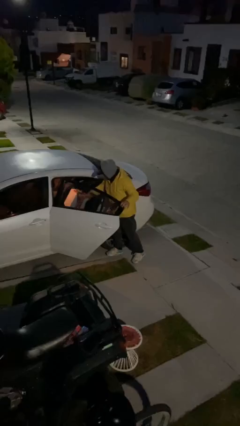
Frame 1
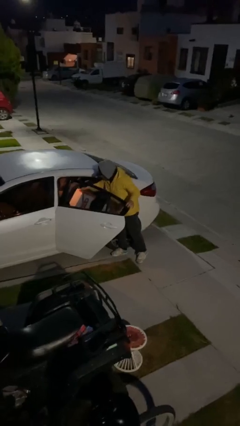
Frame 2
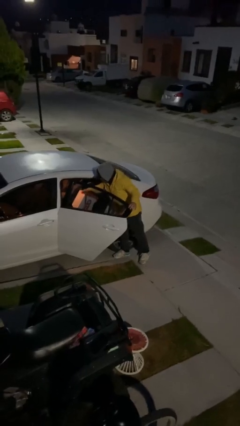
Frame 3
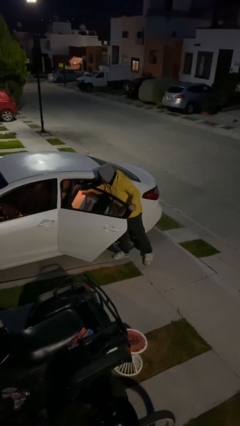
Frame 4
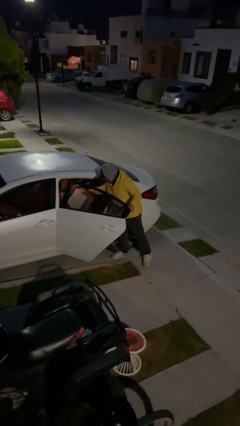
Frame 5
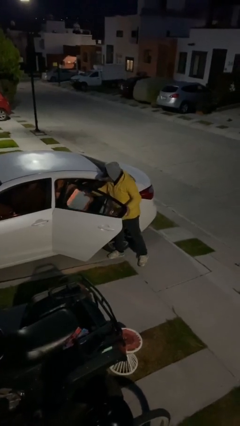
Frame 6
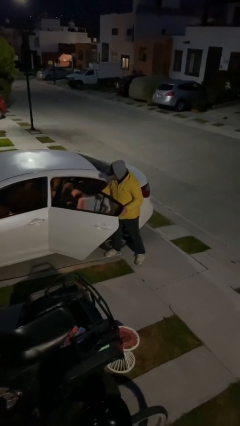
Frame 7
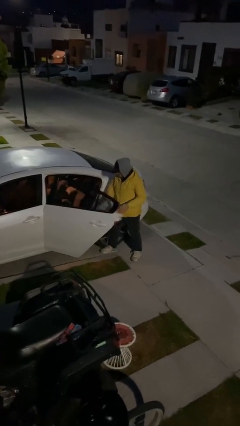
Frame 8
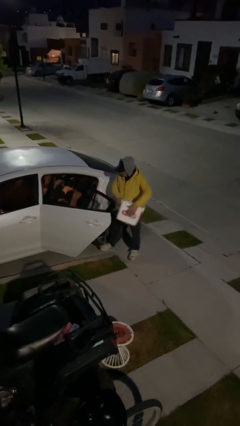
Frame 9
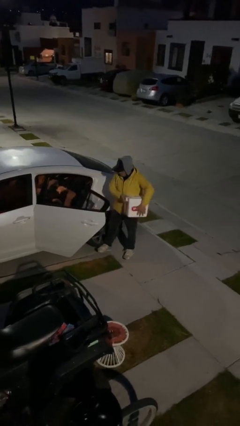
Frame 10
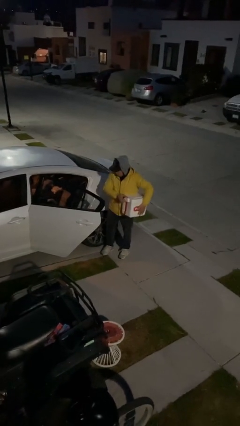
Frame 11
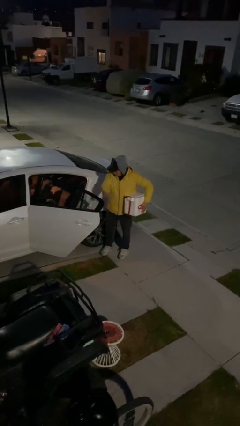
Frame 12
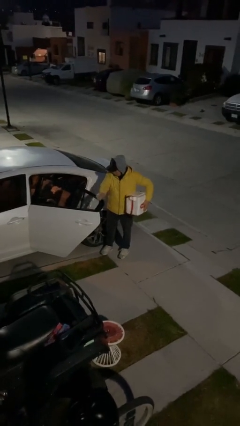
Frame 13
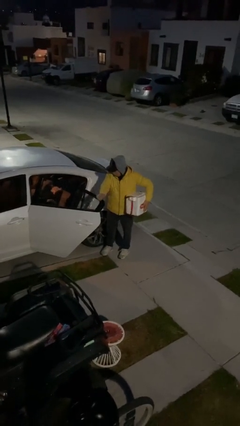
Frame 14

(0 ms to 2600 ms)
person unloads car

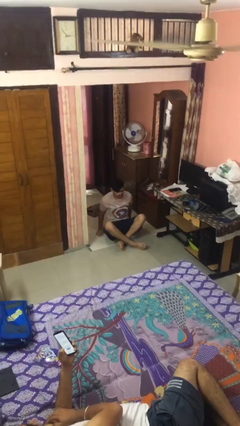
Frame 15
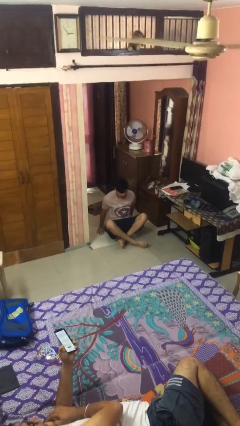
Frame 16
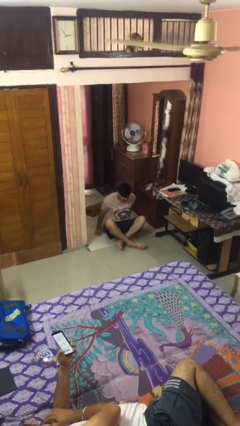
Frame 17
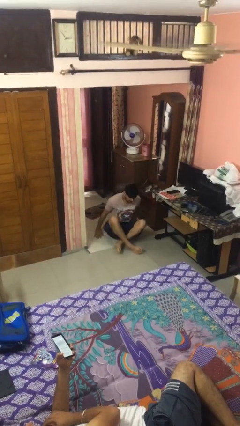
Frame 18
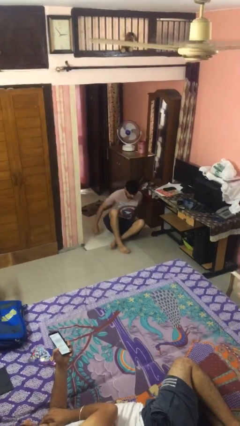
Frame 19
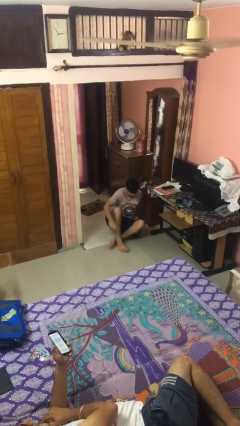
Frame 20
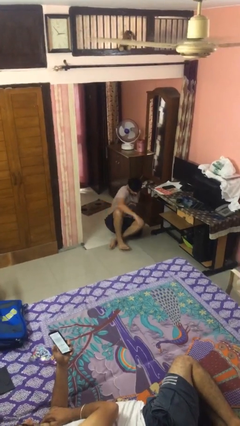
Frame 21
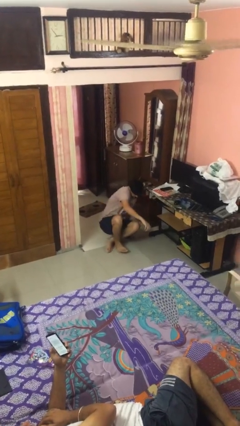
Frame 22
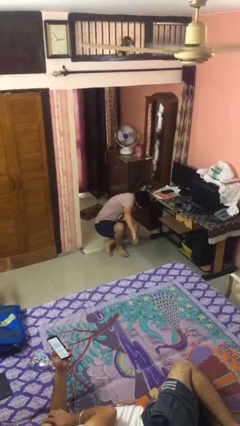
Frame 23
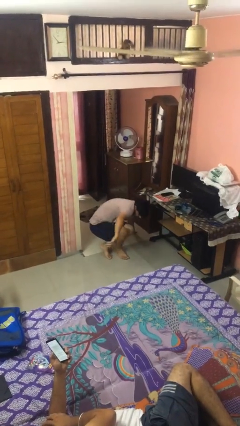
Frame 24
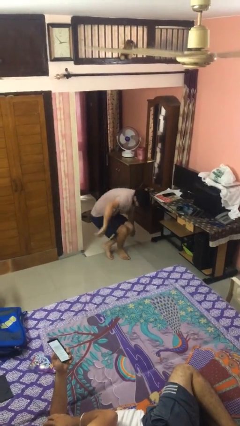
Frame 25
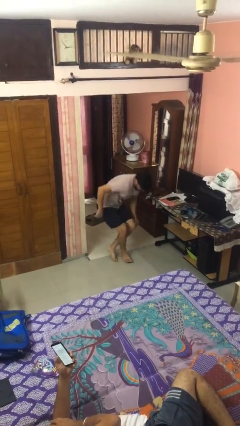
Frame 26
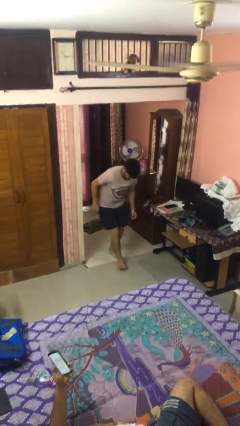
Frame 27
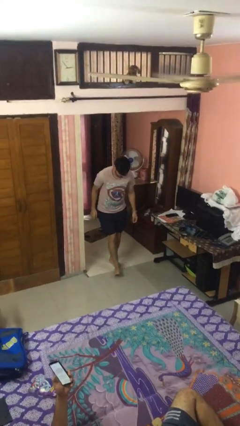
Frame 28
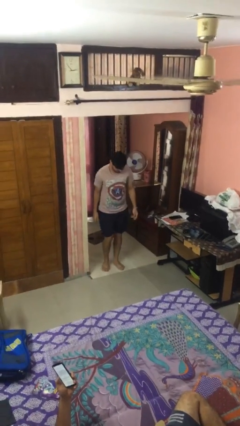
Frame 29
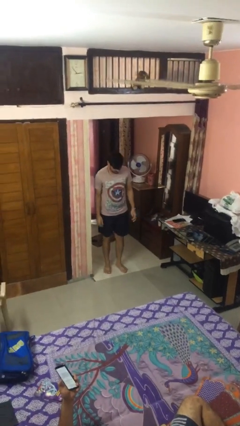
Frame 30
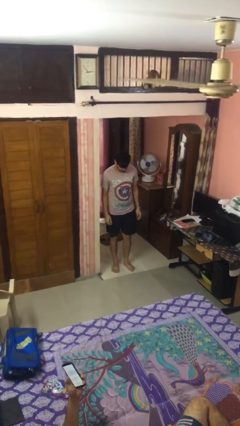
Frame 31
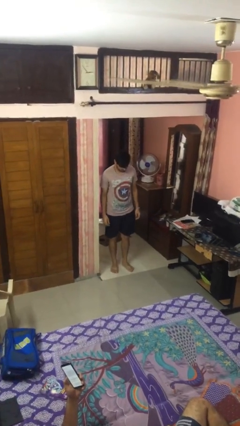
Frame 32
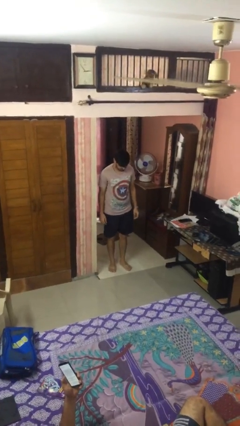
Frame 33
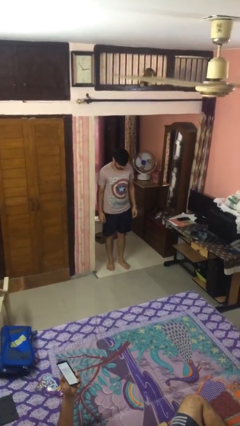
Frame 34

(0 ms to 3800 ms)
person stands up from floor

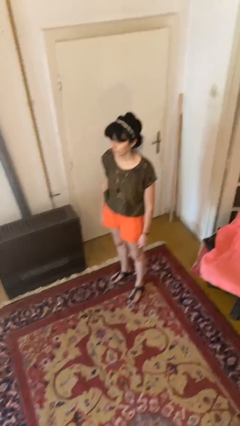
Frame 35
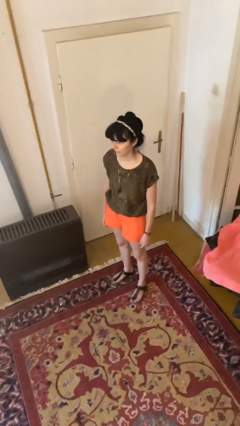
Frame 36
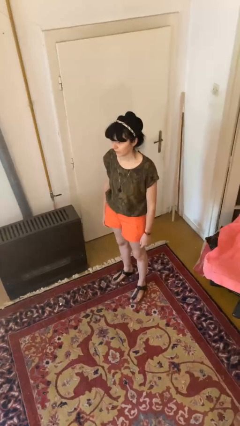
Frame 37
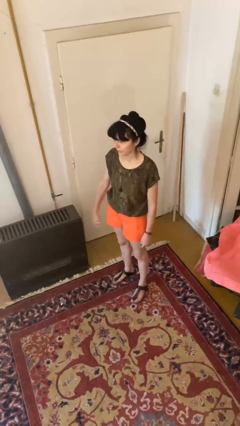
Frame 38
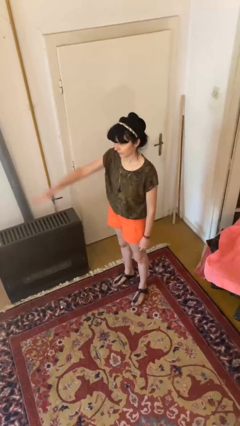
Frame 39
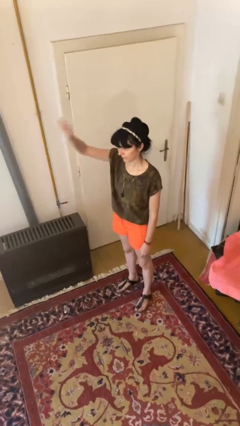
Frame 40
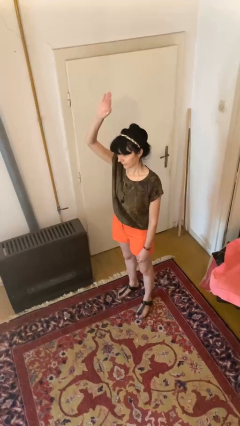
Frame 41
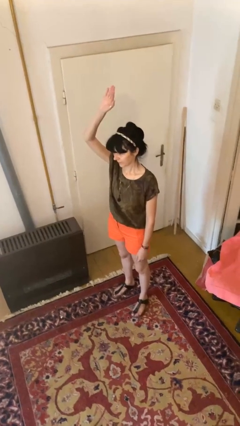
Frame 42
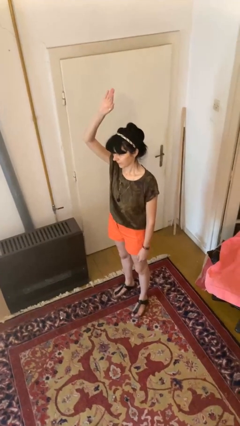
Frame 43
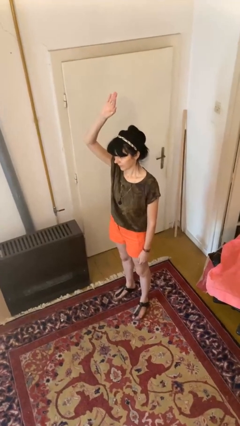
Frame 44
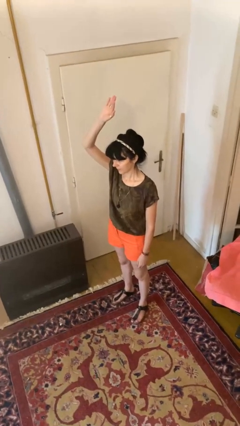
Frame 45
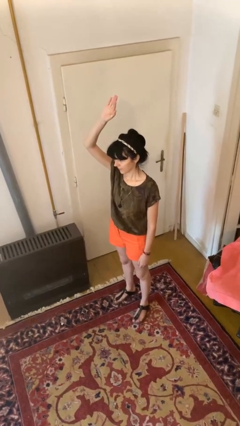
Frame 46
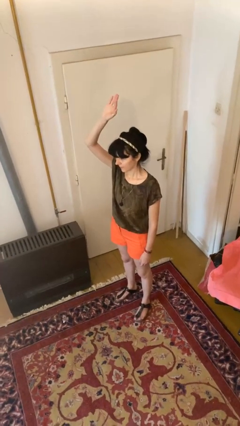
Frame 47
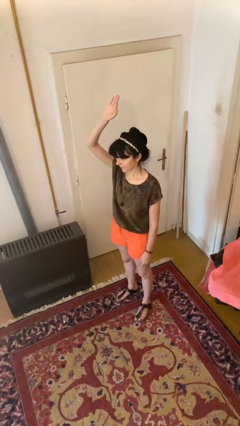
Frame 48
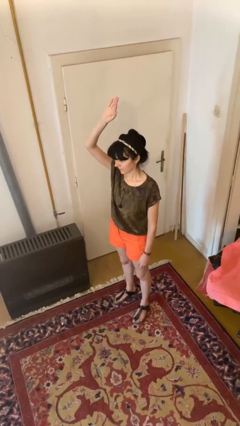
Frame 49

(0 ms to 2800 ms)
person gestures raise hand

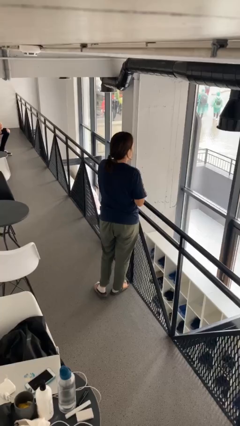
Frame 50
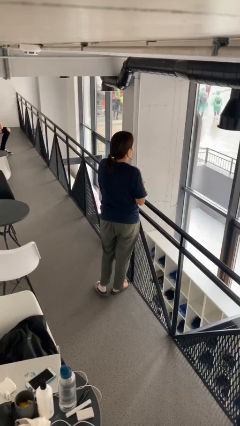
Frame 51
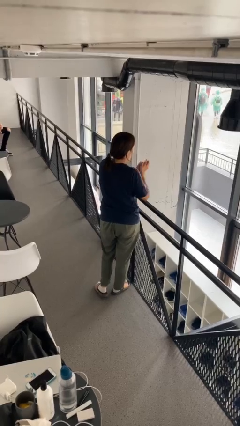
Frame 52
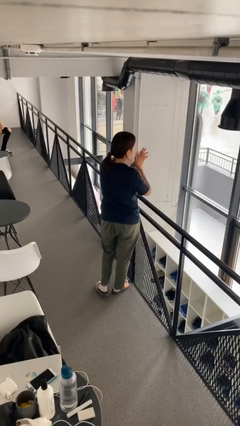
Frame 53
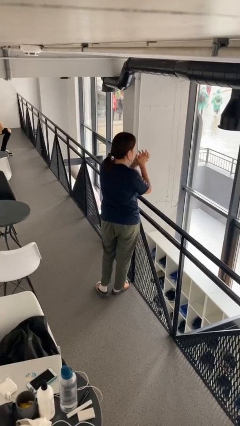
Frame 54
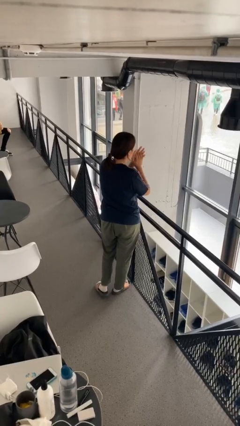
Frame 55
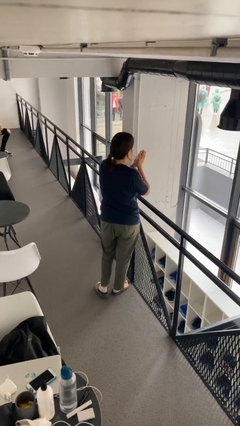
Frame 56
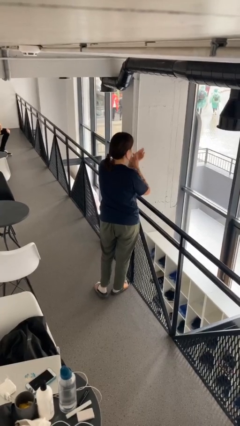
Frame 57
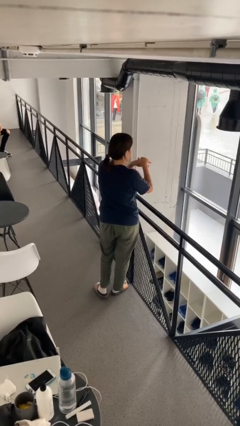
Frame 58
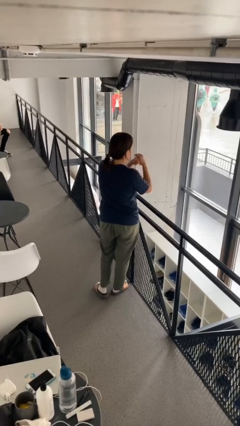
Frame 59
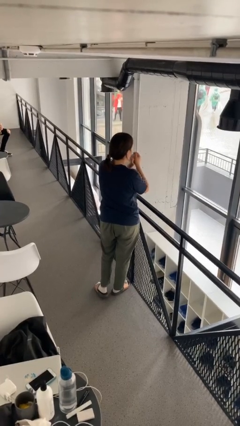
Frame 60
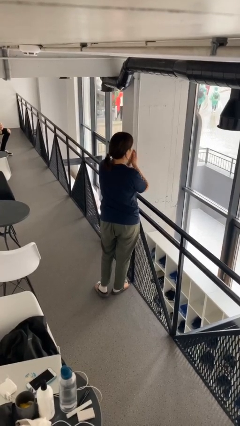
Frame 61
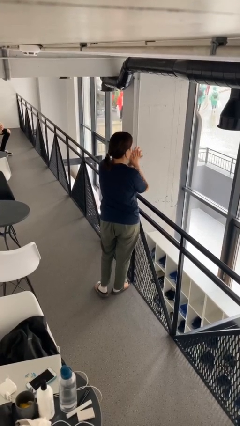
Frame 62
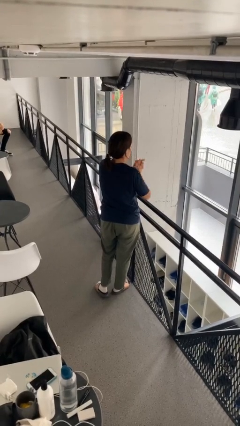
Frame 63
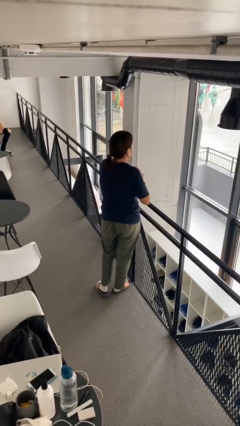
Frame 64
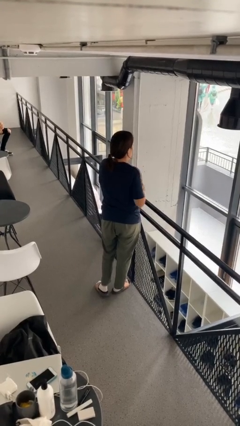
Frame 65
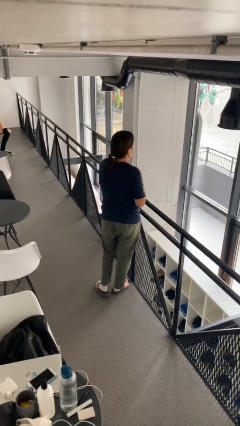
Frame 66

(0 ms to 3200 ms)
person blows into hands

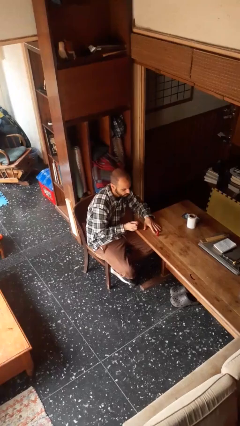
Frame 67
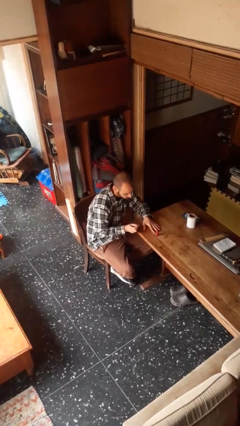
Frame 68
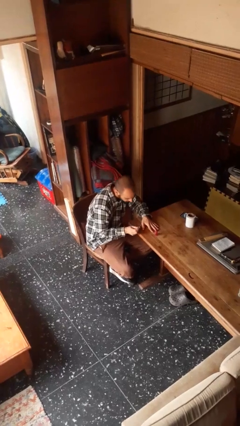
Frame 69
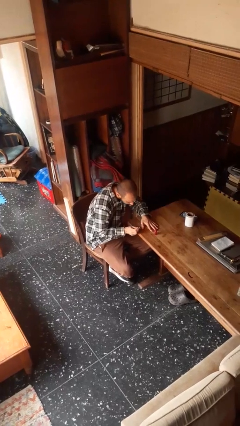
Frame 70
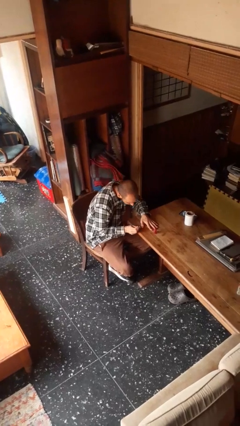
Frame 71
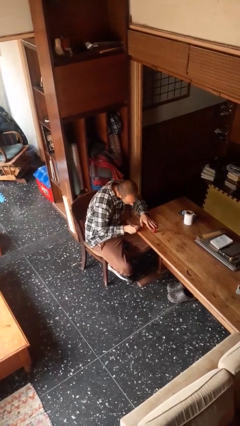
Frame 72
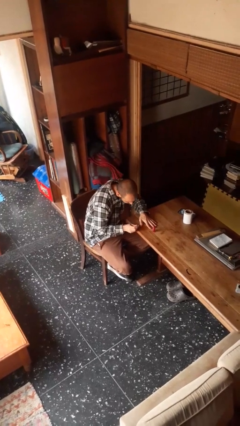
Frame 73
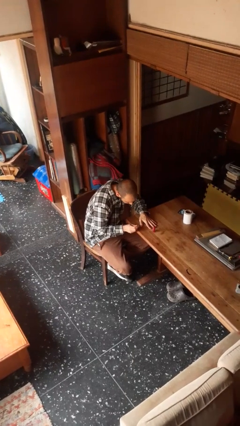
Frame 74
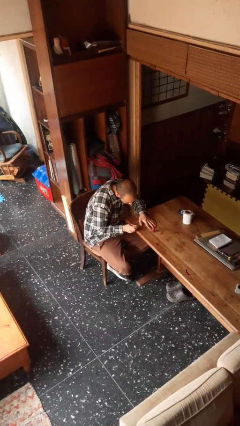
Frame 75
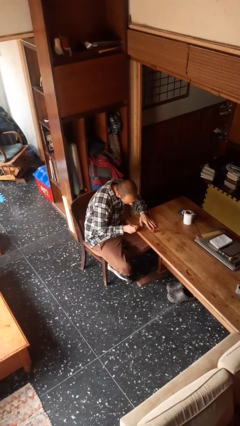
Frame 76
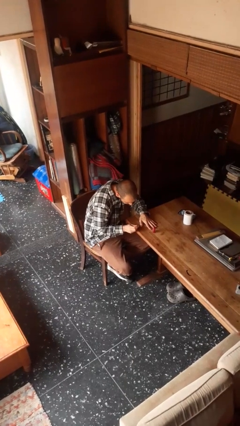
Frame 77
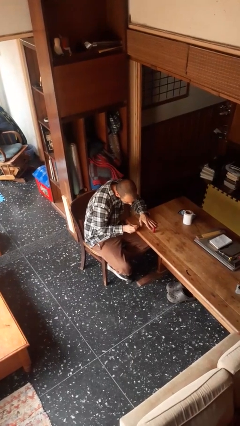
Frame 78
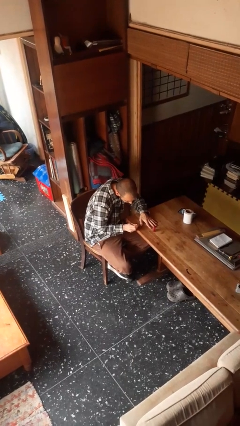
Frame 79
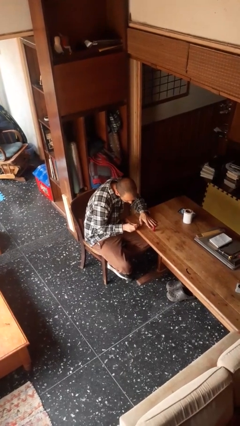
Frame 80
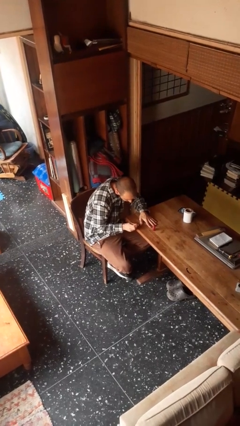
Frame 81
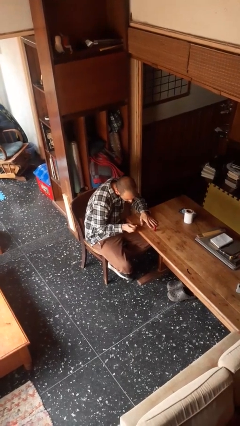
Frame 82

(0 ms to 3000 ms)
person paints fingernails

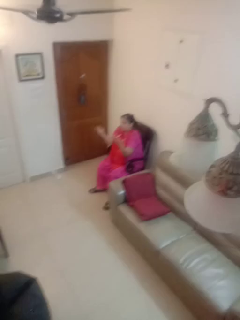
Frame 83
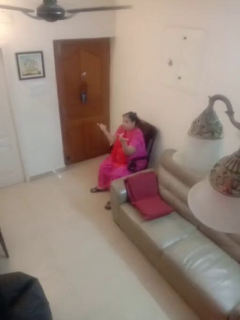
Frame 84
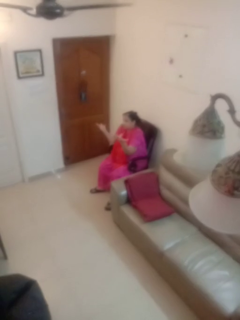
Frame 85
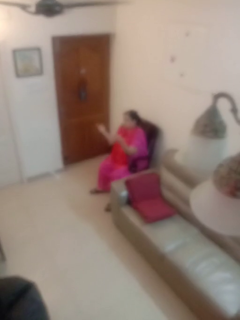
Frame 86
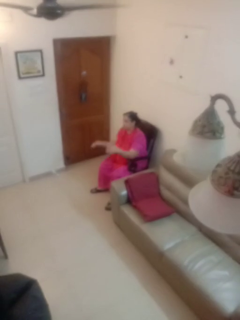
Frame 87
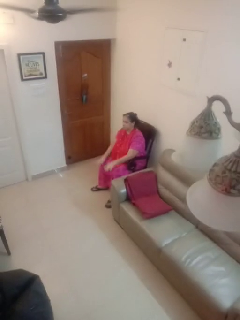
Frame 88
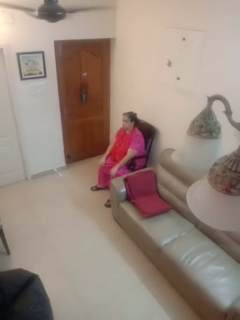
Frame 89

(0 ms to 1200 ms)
person shrugs

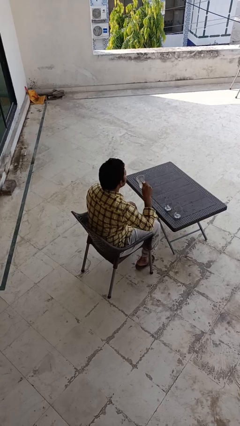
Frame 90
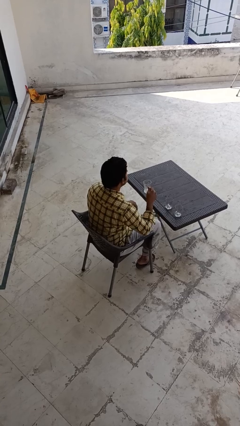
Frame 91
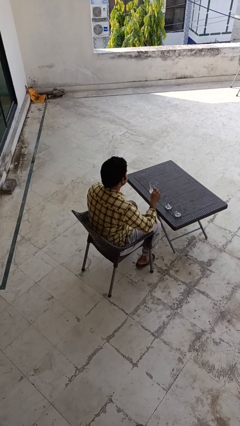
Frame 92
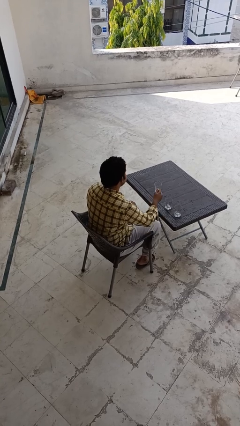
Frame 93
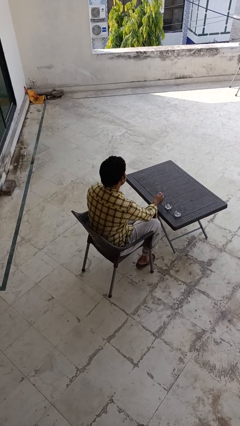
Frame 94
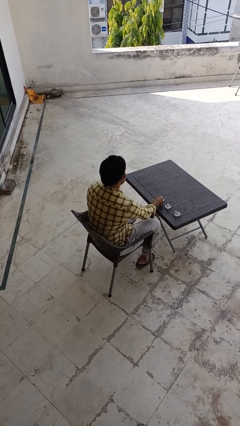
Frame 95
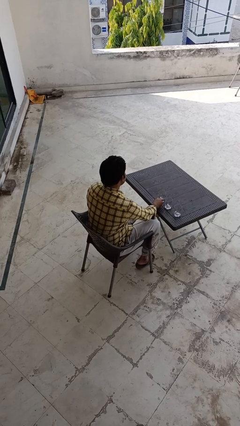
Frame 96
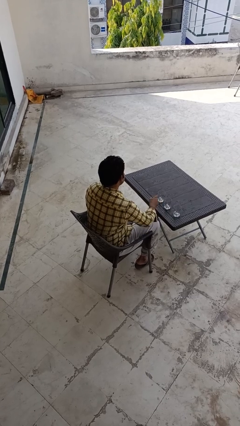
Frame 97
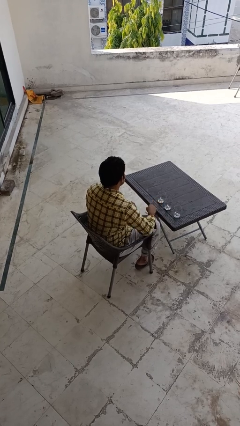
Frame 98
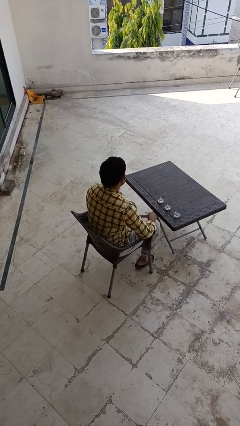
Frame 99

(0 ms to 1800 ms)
person puts down object on table
